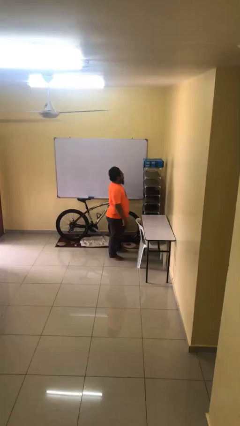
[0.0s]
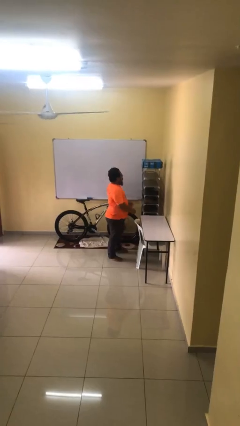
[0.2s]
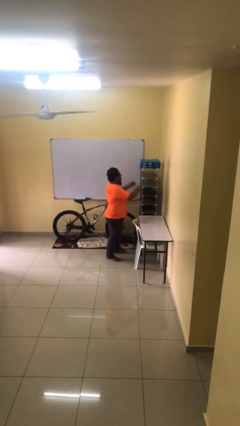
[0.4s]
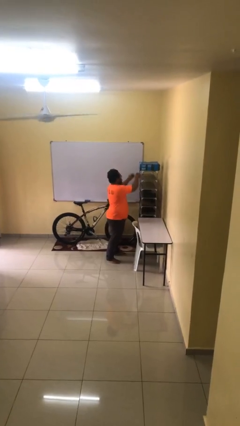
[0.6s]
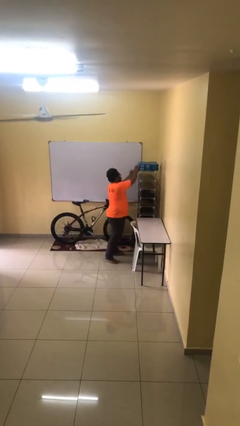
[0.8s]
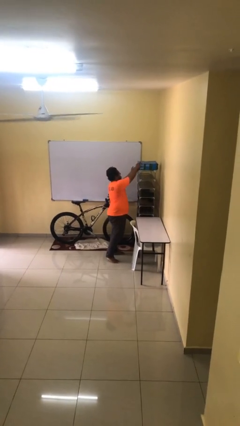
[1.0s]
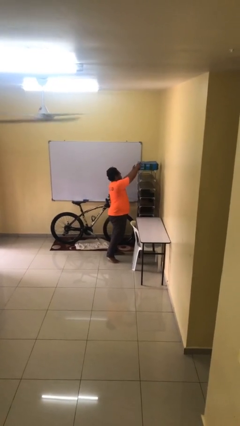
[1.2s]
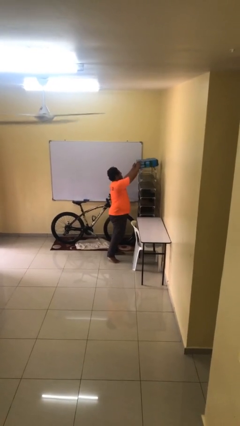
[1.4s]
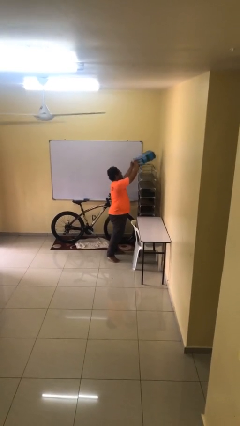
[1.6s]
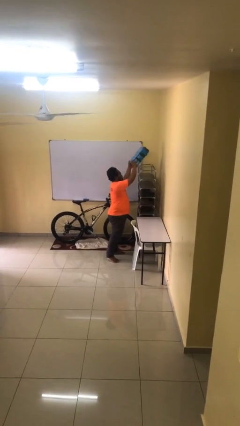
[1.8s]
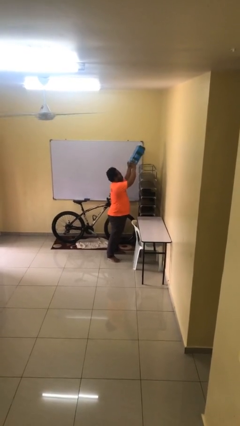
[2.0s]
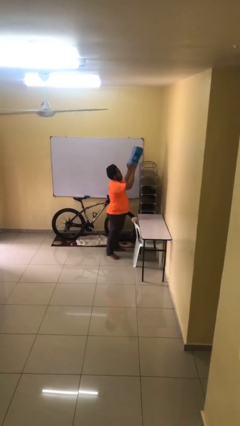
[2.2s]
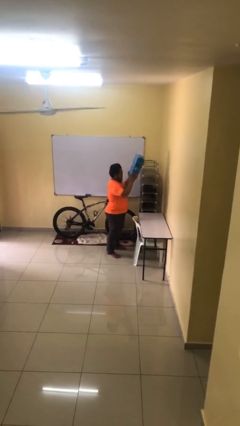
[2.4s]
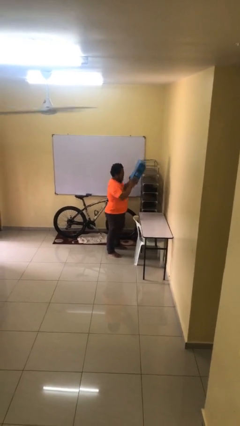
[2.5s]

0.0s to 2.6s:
person picks up object from shelf

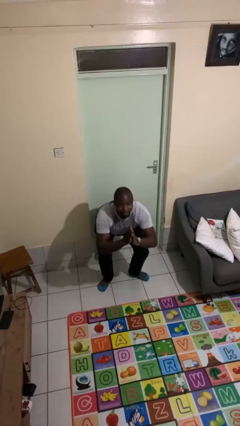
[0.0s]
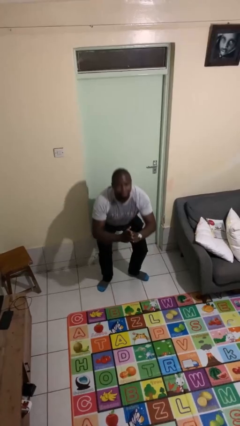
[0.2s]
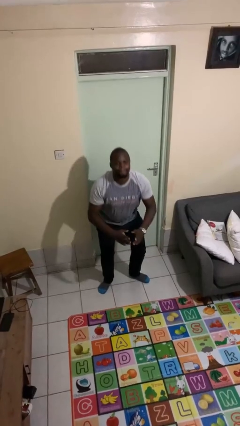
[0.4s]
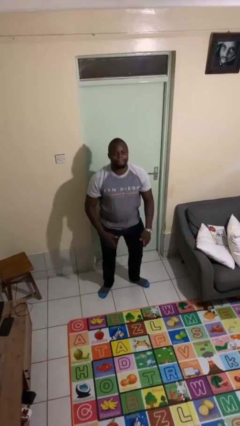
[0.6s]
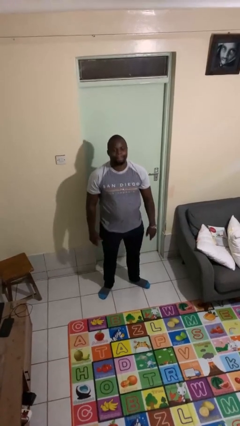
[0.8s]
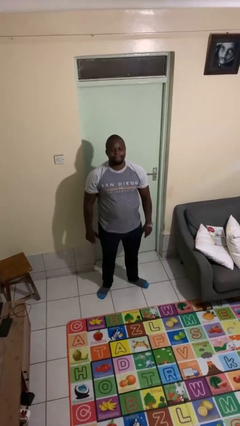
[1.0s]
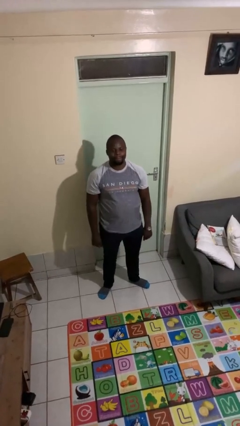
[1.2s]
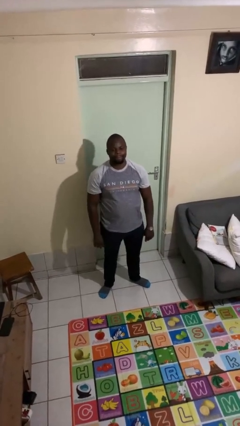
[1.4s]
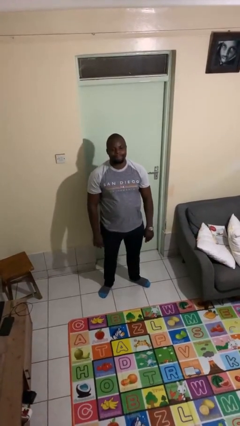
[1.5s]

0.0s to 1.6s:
person stands up

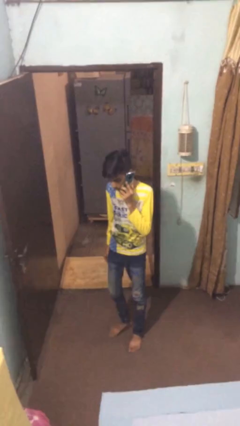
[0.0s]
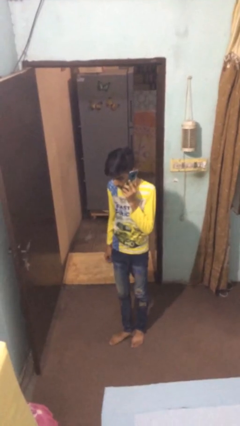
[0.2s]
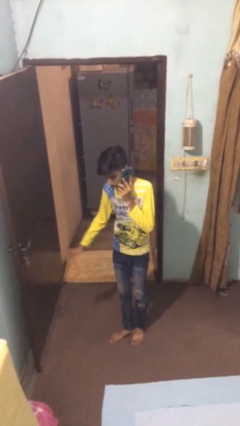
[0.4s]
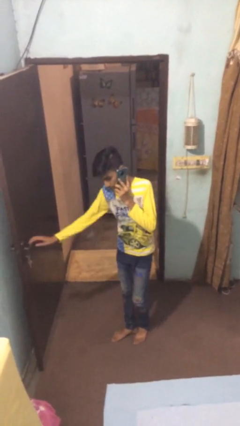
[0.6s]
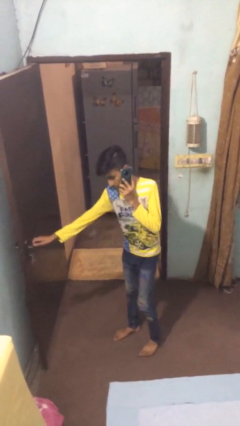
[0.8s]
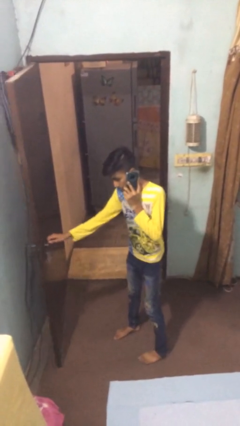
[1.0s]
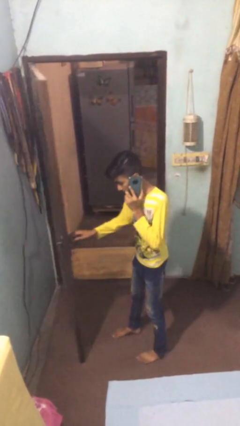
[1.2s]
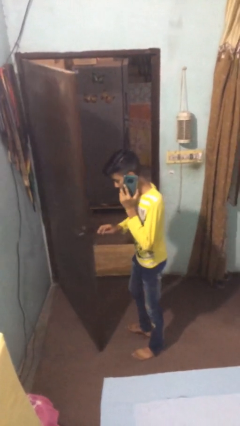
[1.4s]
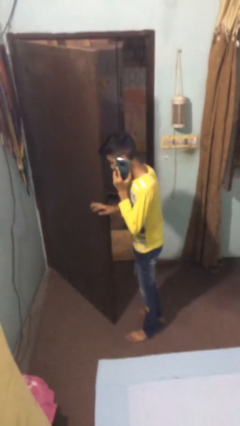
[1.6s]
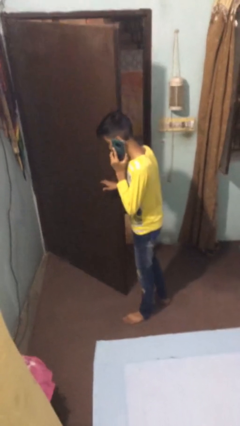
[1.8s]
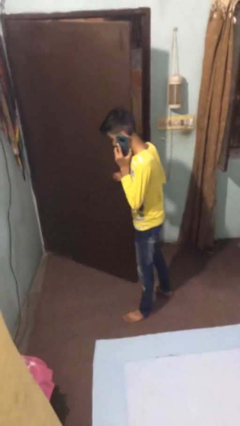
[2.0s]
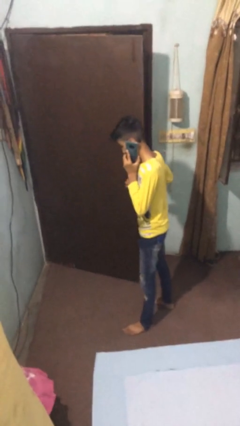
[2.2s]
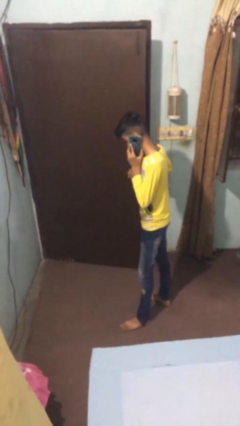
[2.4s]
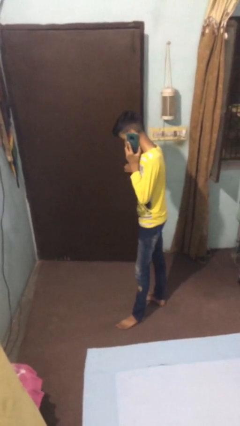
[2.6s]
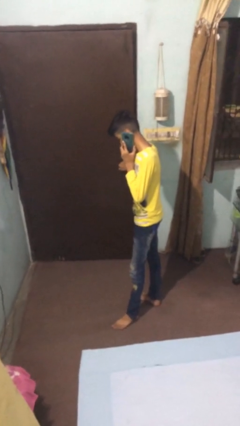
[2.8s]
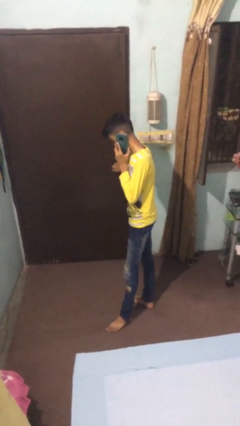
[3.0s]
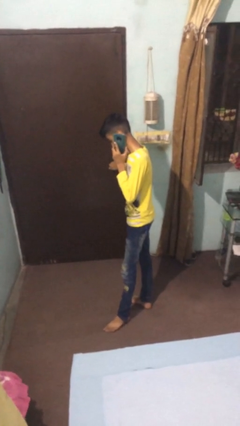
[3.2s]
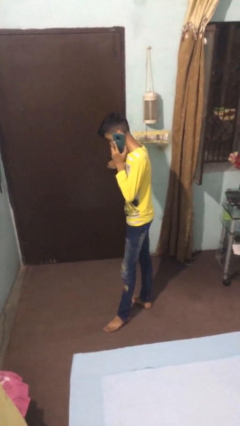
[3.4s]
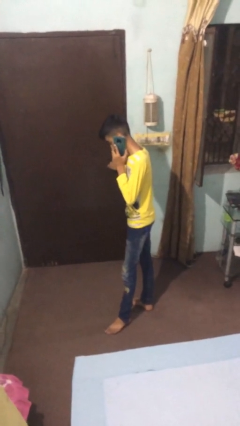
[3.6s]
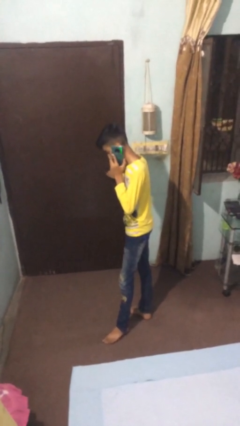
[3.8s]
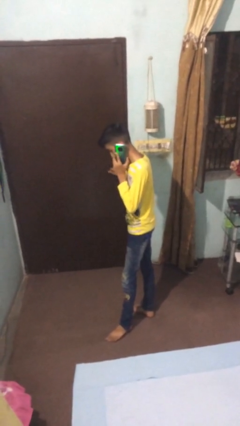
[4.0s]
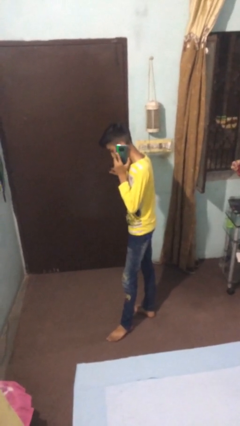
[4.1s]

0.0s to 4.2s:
person closes facility door

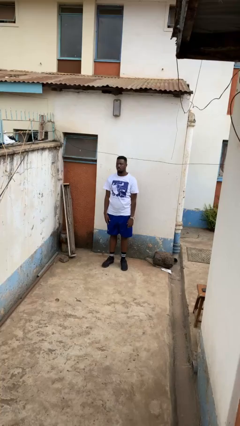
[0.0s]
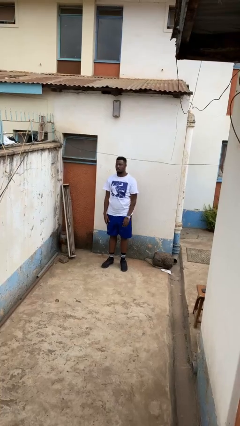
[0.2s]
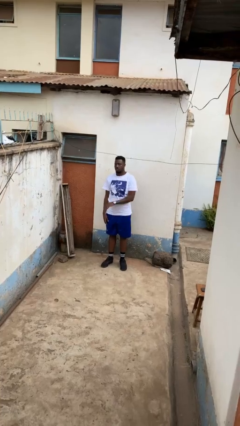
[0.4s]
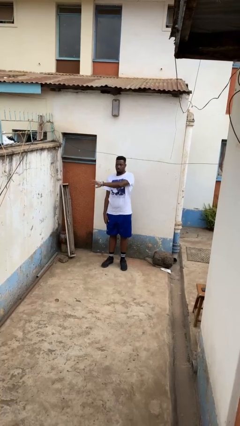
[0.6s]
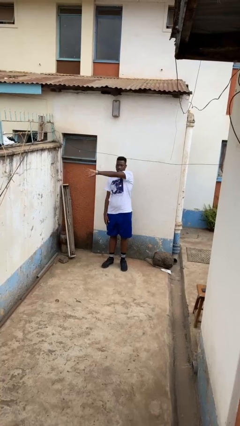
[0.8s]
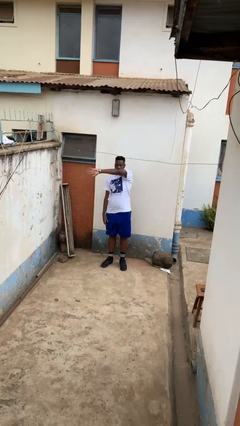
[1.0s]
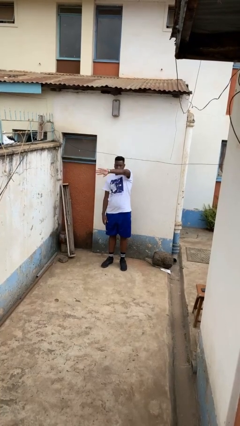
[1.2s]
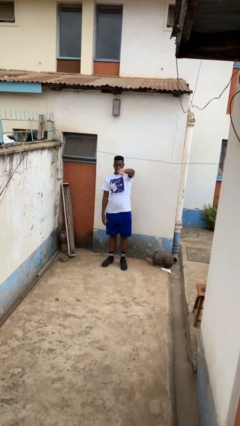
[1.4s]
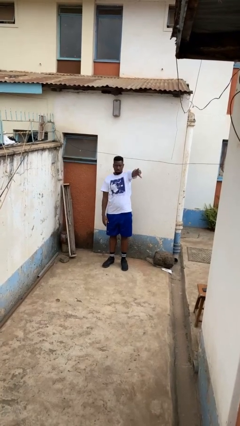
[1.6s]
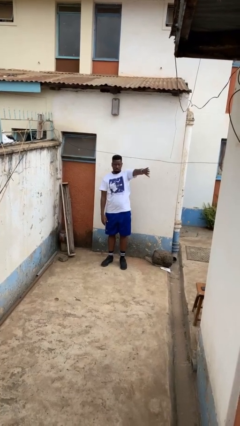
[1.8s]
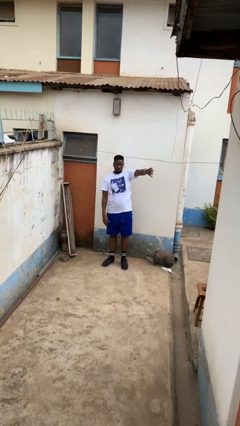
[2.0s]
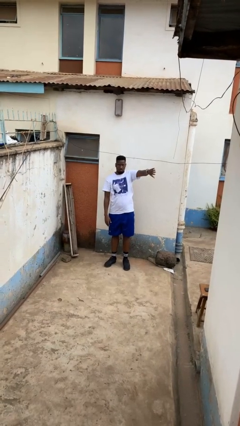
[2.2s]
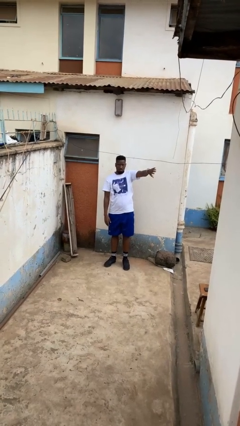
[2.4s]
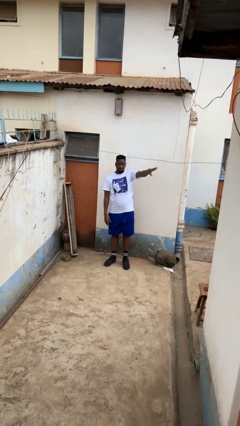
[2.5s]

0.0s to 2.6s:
person gestures swipe left

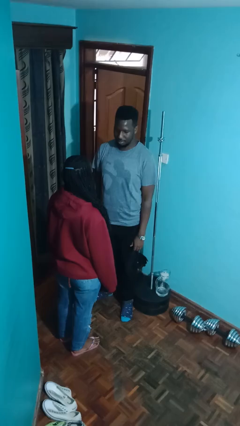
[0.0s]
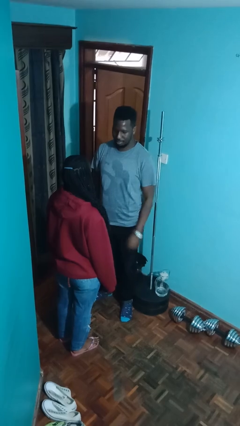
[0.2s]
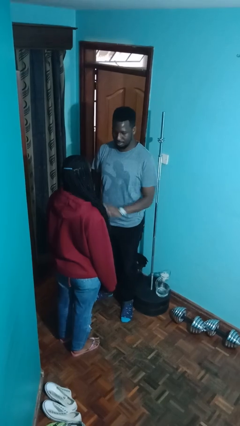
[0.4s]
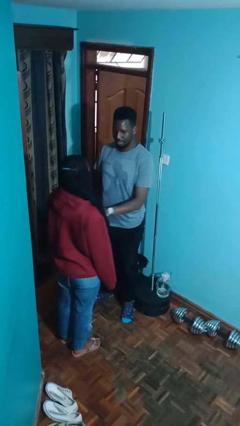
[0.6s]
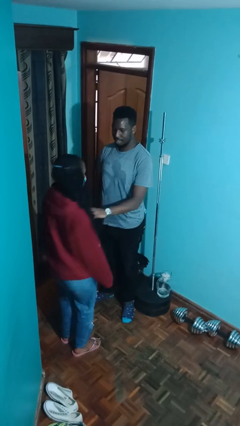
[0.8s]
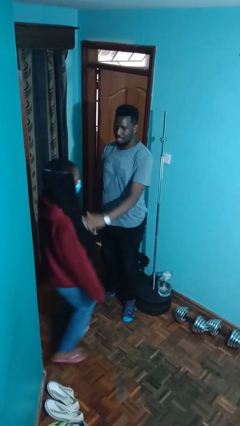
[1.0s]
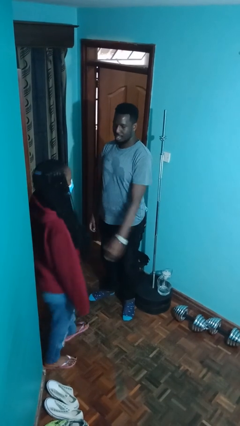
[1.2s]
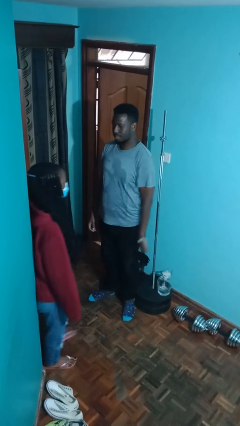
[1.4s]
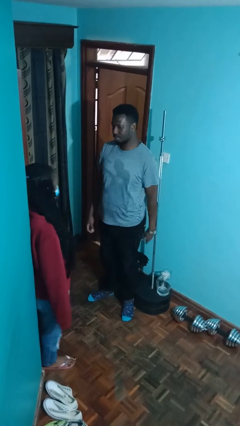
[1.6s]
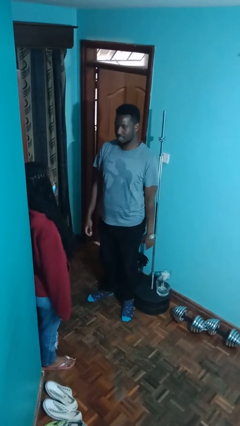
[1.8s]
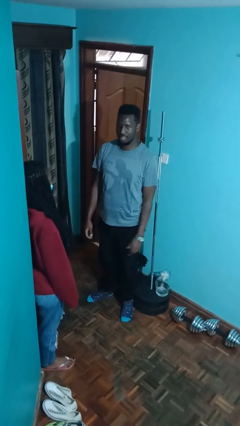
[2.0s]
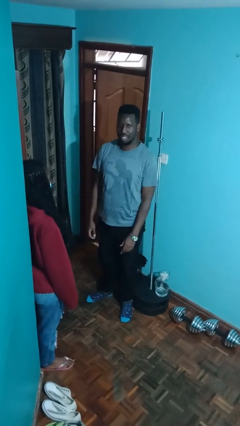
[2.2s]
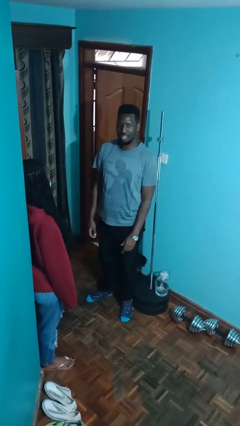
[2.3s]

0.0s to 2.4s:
person shoves person

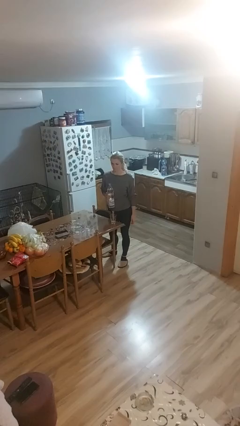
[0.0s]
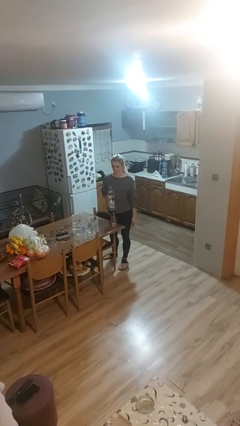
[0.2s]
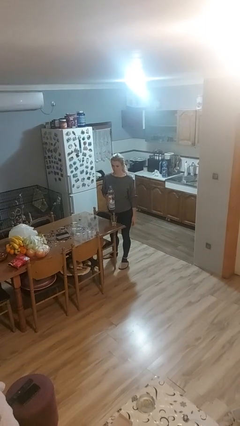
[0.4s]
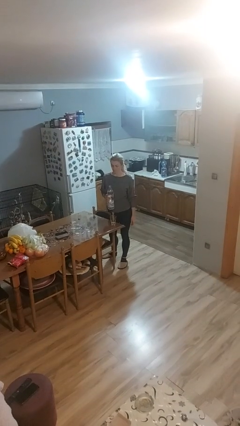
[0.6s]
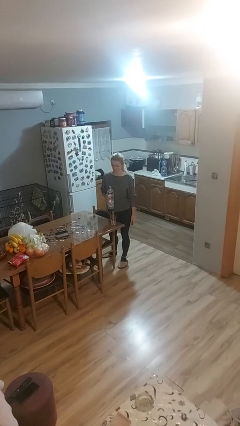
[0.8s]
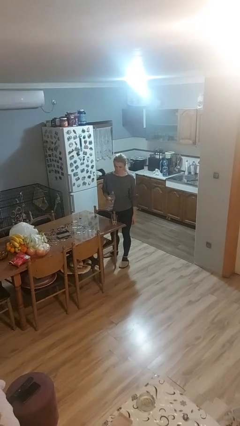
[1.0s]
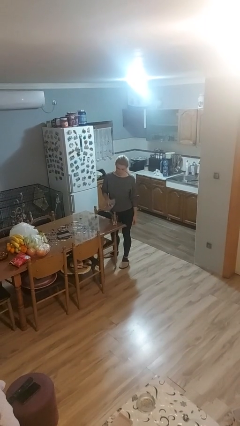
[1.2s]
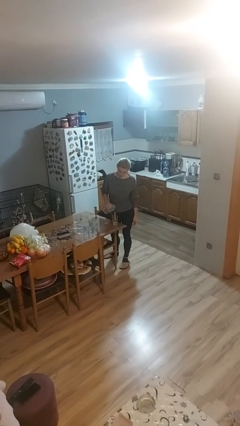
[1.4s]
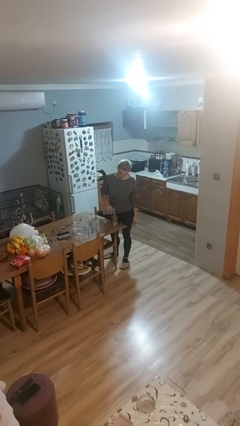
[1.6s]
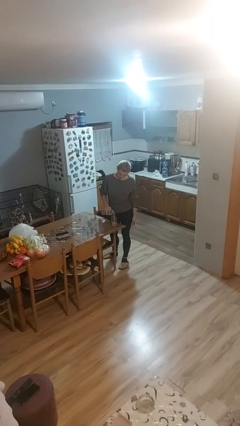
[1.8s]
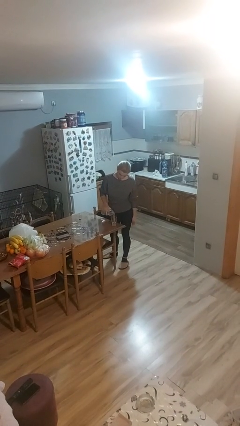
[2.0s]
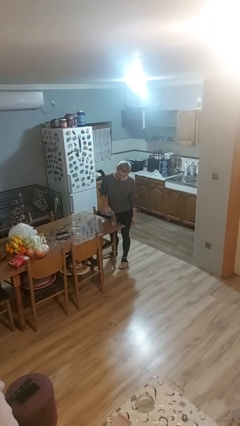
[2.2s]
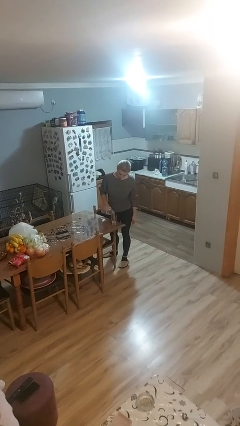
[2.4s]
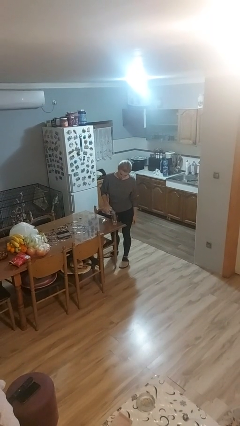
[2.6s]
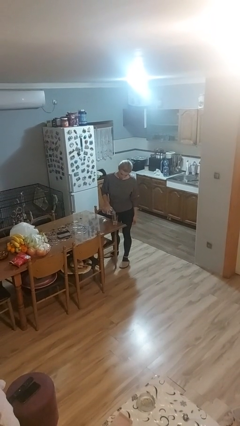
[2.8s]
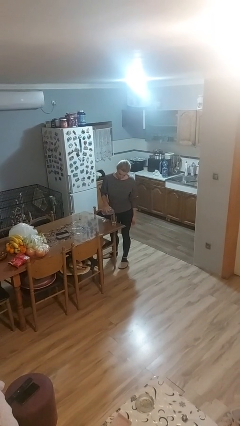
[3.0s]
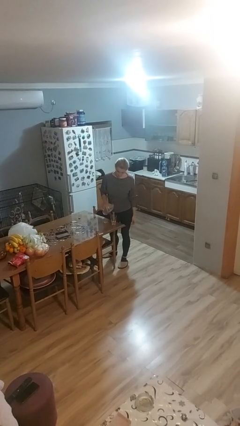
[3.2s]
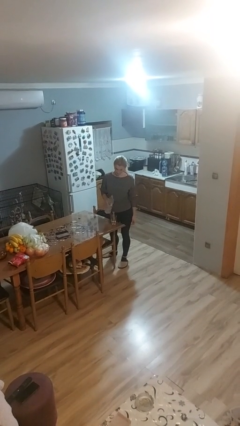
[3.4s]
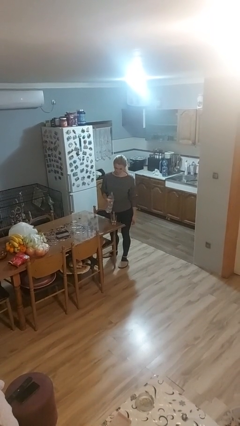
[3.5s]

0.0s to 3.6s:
person pours liquid into cup

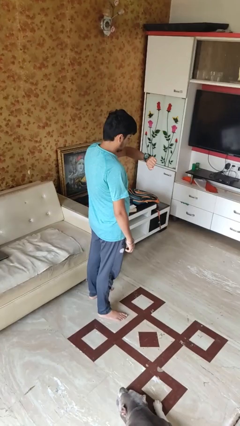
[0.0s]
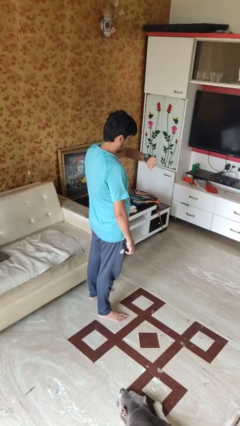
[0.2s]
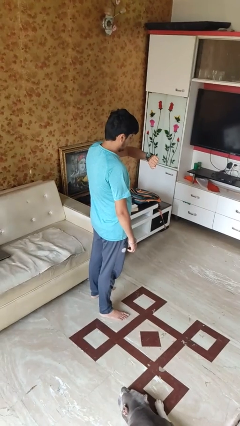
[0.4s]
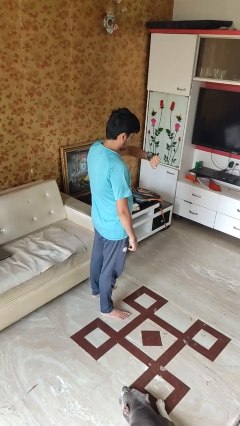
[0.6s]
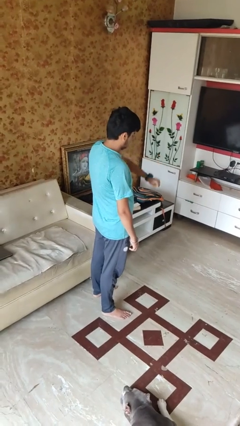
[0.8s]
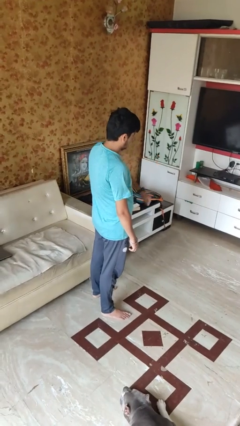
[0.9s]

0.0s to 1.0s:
person looks at wristwatch
